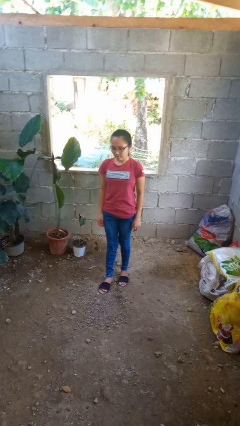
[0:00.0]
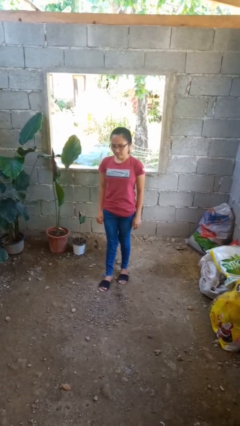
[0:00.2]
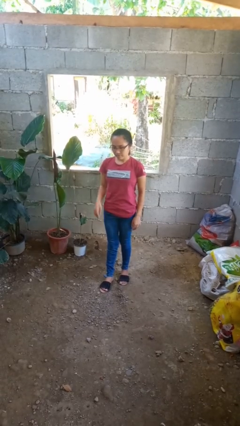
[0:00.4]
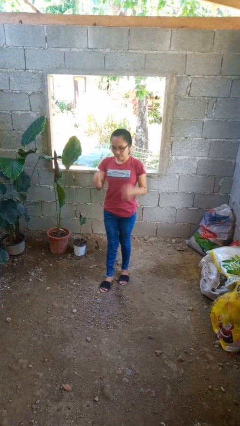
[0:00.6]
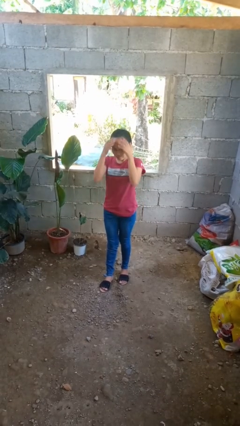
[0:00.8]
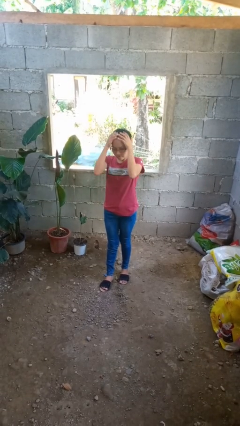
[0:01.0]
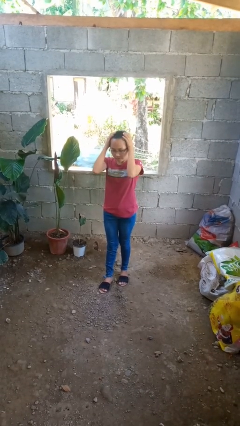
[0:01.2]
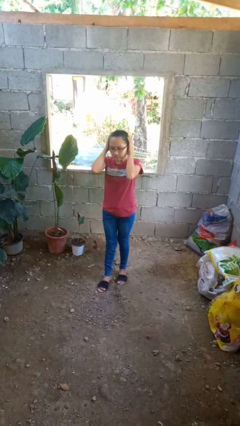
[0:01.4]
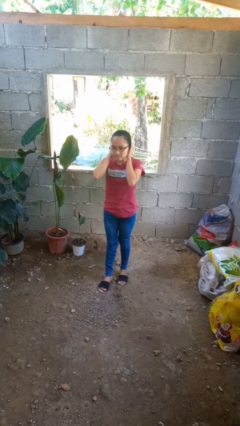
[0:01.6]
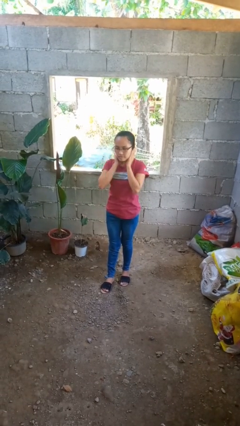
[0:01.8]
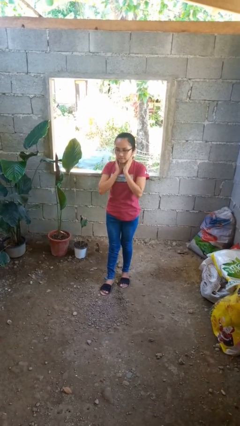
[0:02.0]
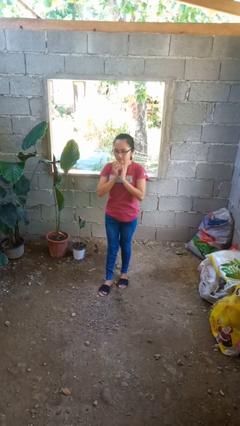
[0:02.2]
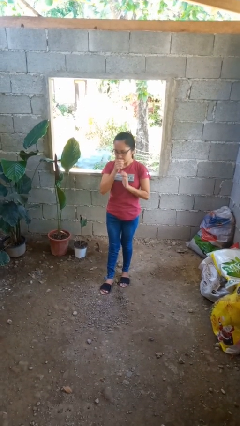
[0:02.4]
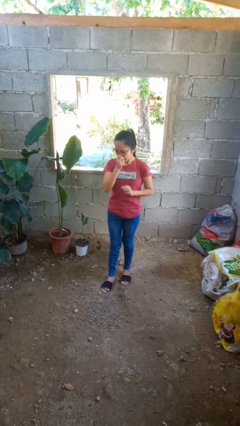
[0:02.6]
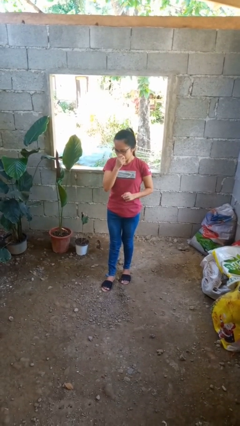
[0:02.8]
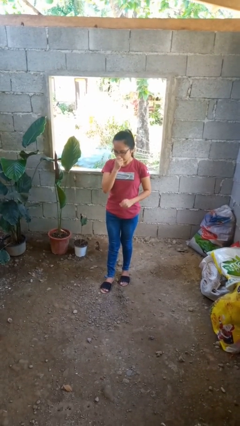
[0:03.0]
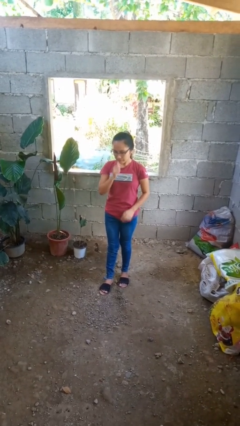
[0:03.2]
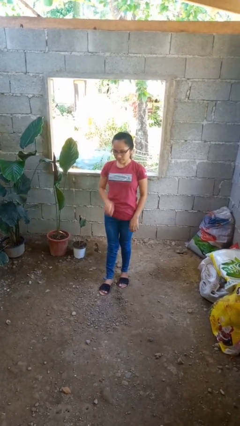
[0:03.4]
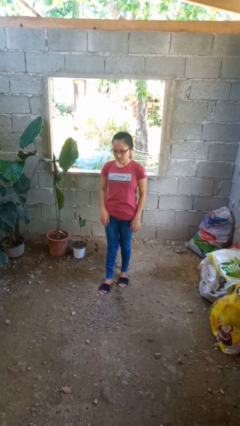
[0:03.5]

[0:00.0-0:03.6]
person scratches face

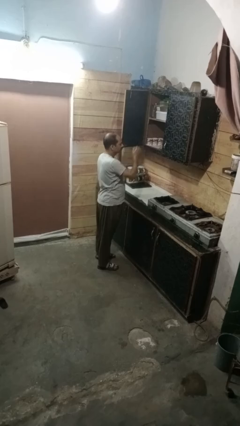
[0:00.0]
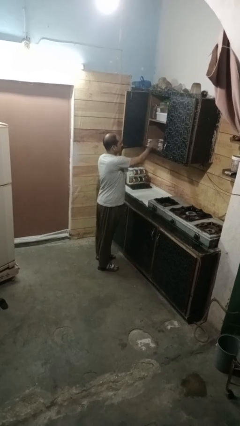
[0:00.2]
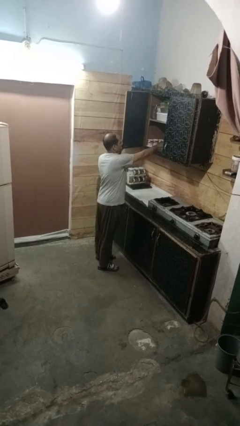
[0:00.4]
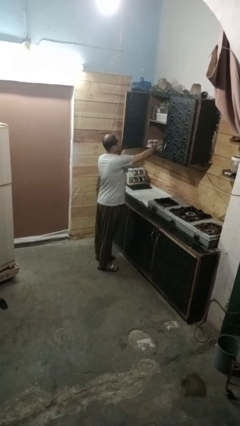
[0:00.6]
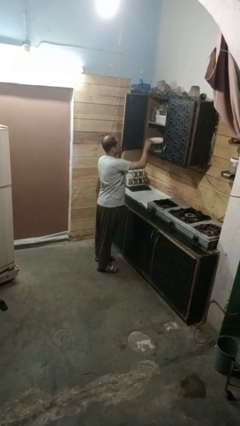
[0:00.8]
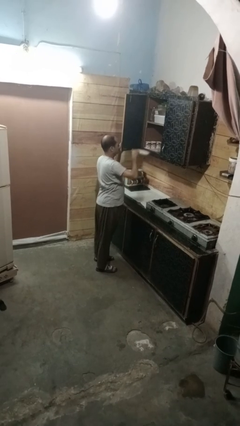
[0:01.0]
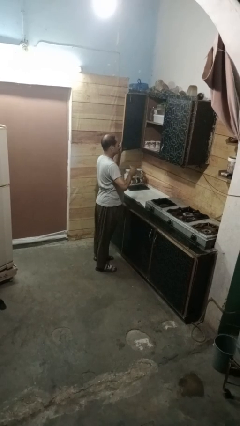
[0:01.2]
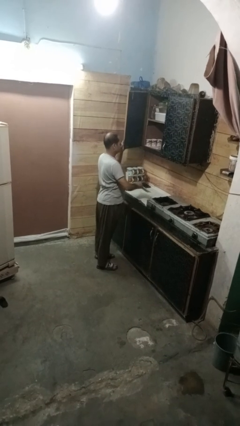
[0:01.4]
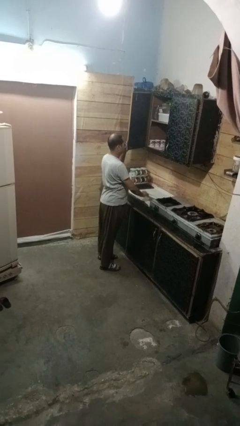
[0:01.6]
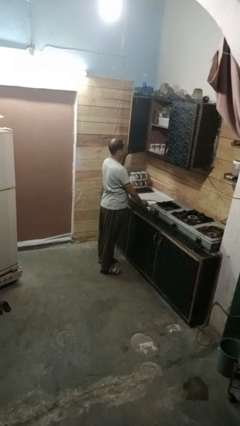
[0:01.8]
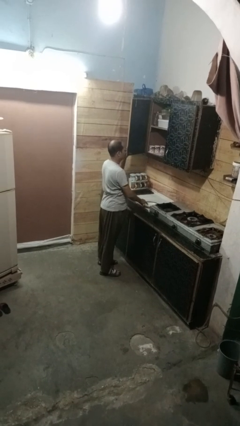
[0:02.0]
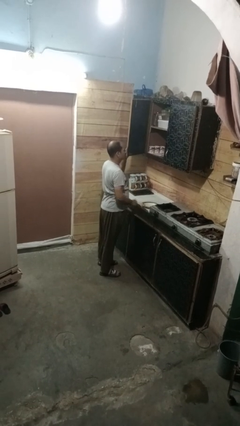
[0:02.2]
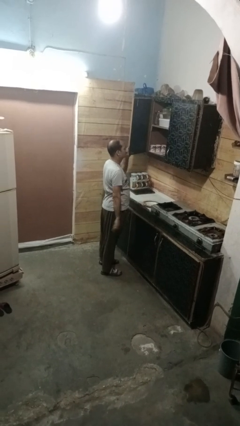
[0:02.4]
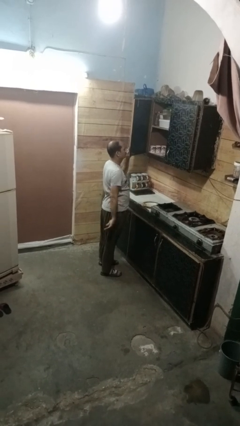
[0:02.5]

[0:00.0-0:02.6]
person takes object from cabinet

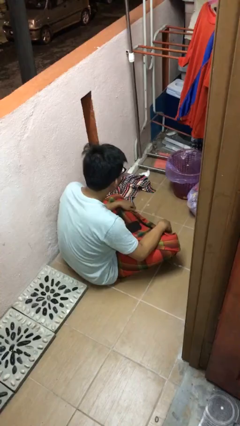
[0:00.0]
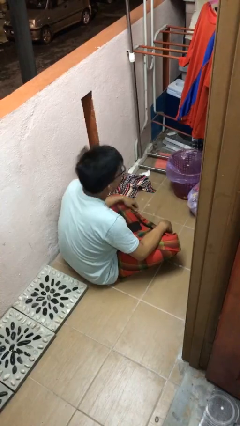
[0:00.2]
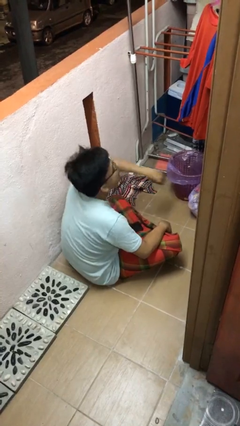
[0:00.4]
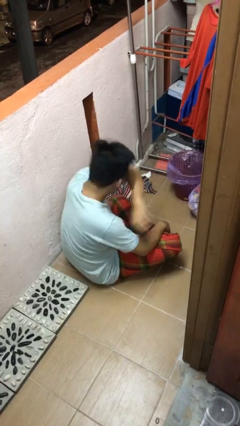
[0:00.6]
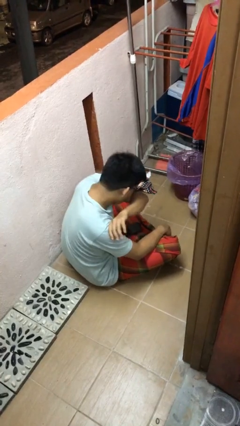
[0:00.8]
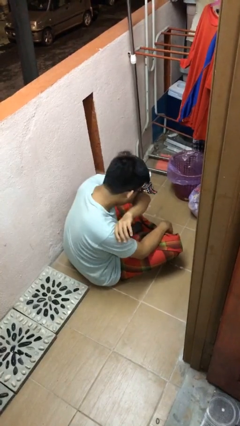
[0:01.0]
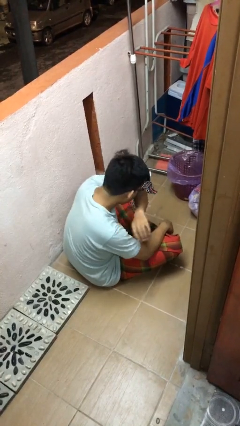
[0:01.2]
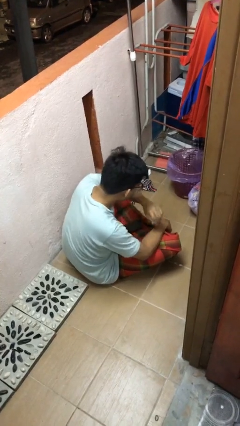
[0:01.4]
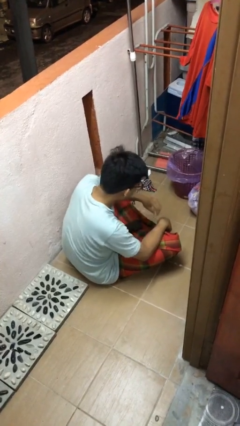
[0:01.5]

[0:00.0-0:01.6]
person sneezes into arm

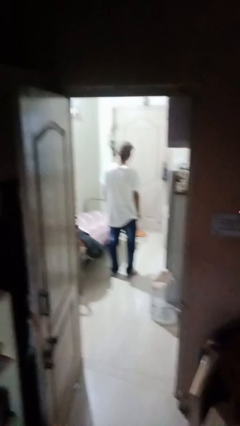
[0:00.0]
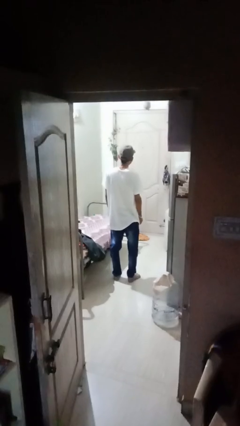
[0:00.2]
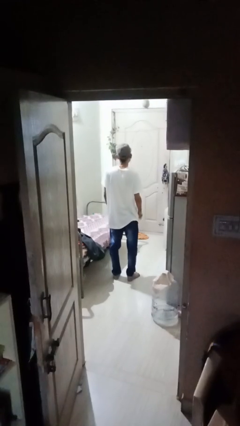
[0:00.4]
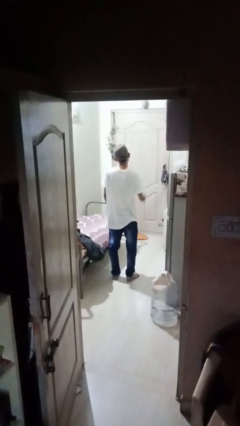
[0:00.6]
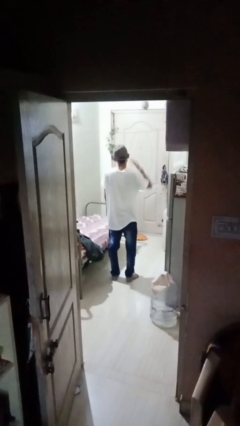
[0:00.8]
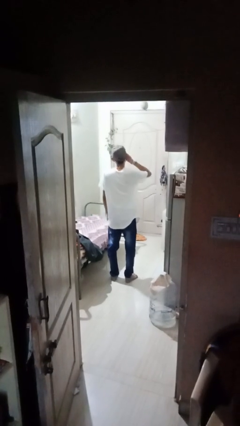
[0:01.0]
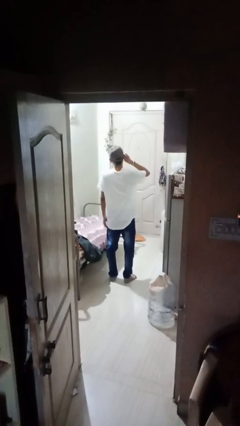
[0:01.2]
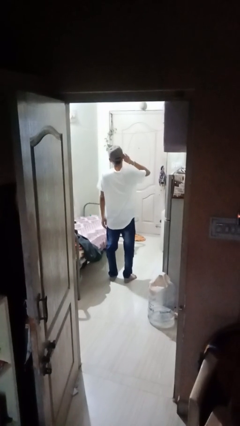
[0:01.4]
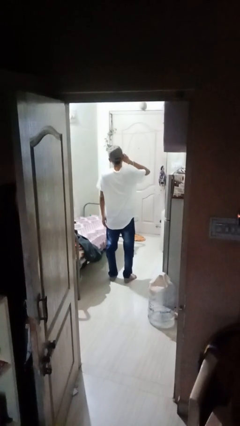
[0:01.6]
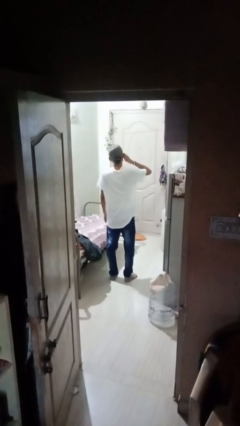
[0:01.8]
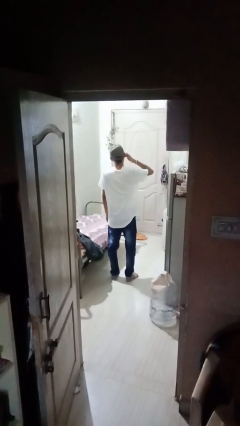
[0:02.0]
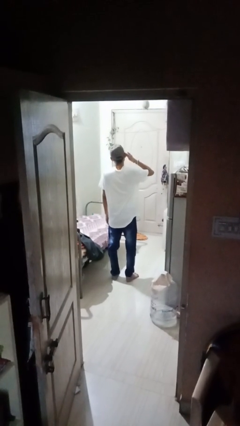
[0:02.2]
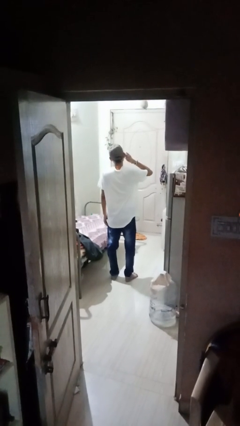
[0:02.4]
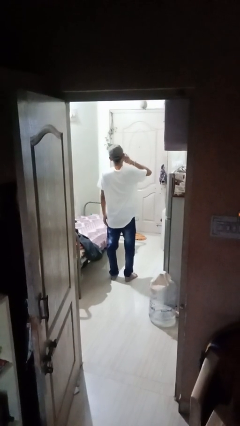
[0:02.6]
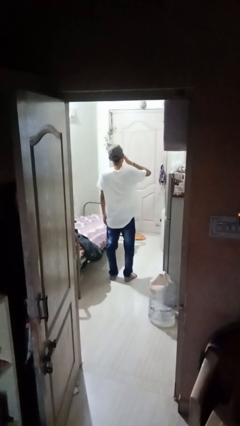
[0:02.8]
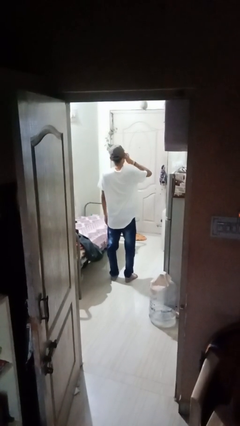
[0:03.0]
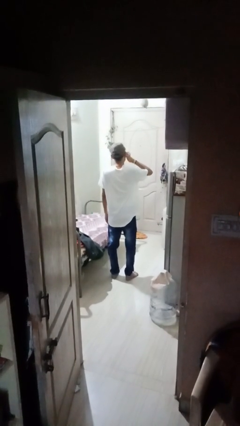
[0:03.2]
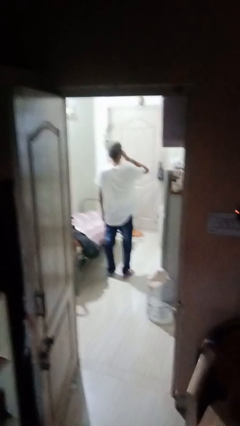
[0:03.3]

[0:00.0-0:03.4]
person rubs eyes

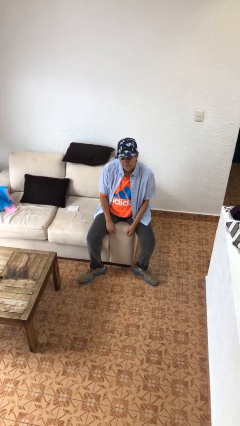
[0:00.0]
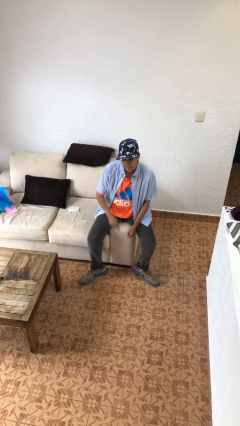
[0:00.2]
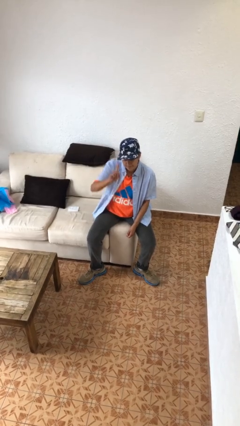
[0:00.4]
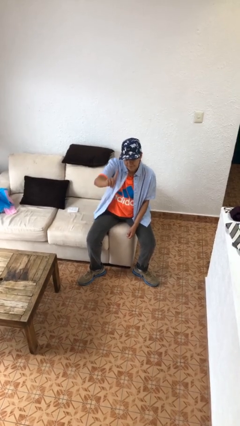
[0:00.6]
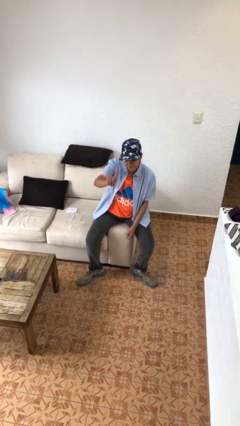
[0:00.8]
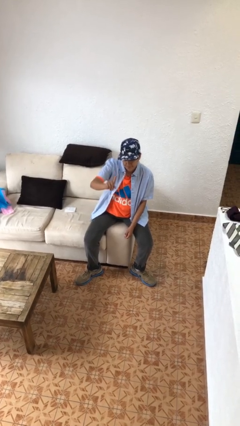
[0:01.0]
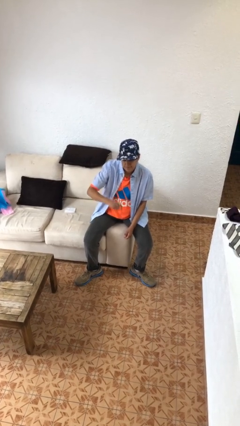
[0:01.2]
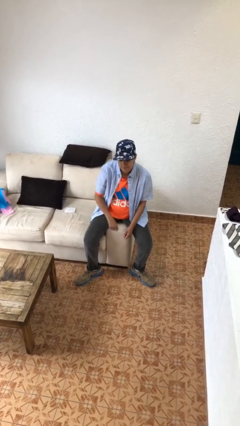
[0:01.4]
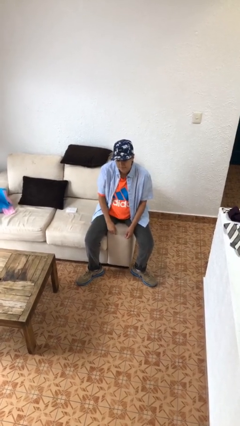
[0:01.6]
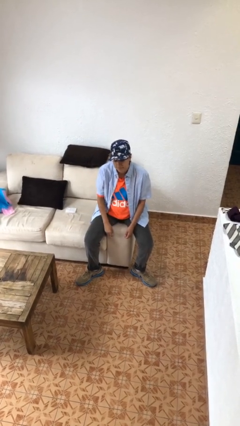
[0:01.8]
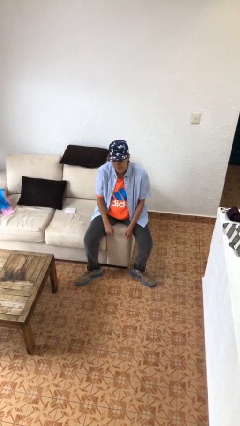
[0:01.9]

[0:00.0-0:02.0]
person gestures number one

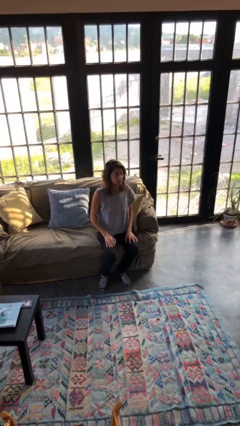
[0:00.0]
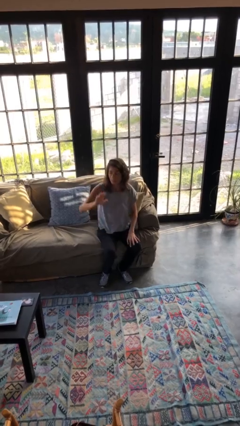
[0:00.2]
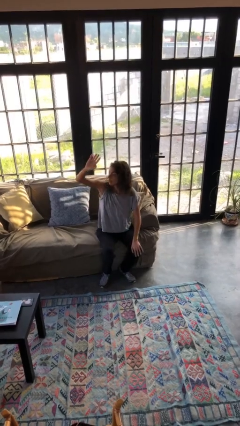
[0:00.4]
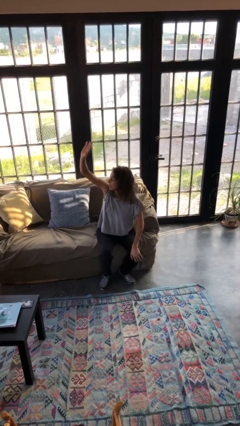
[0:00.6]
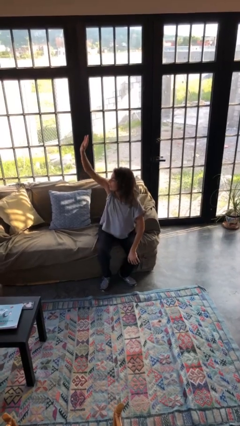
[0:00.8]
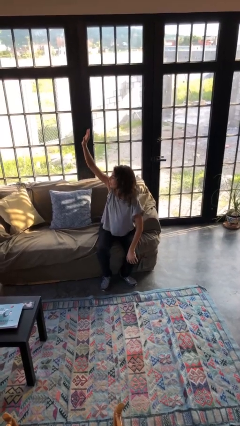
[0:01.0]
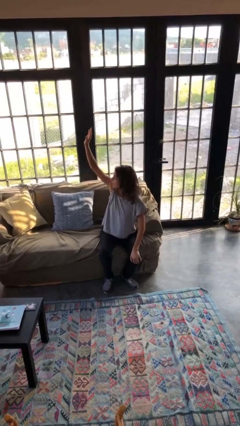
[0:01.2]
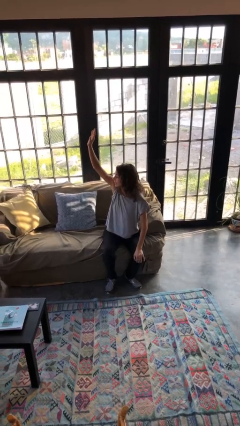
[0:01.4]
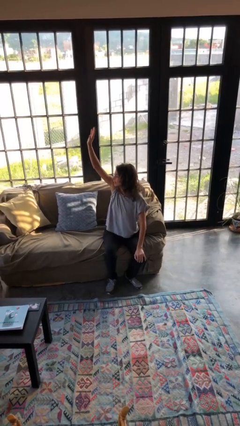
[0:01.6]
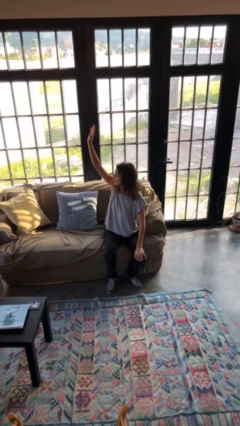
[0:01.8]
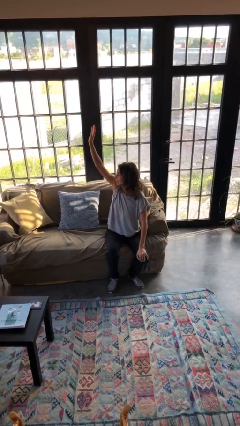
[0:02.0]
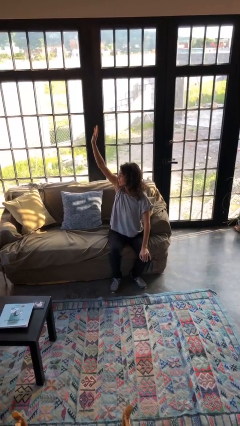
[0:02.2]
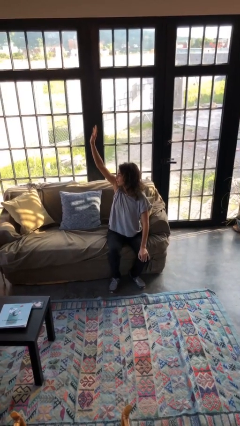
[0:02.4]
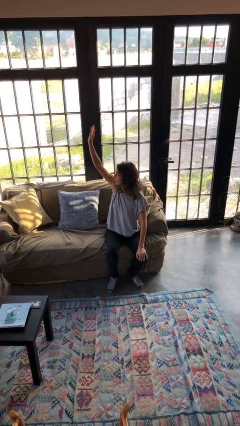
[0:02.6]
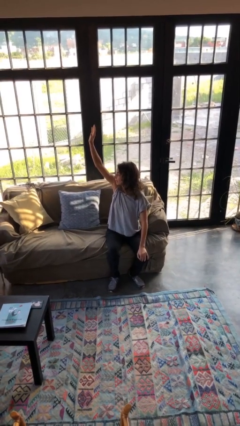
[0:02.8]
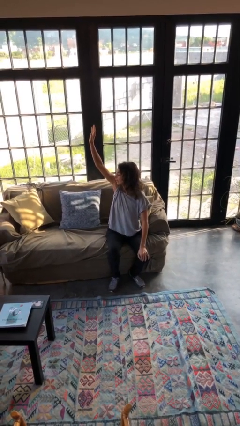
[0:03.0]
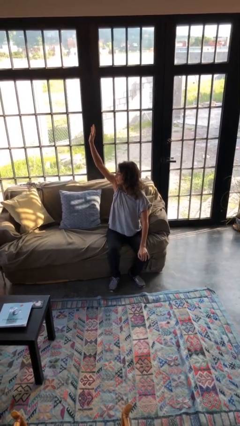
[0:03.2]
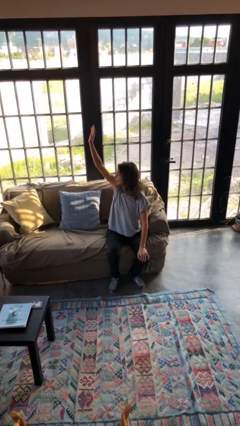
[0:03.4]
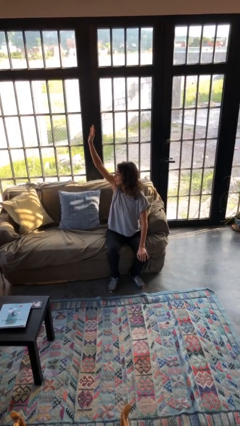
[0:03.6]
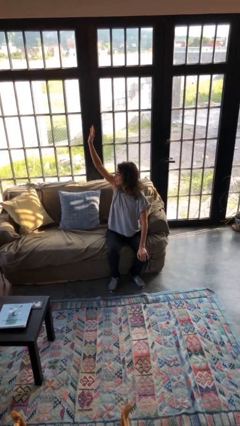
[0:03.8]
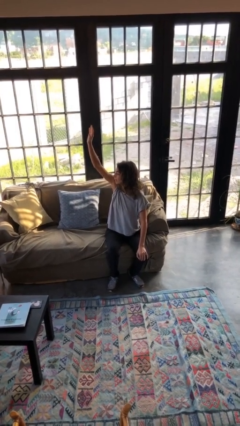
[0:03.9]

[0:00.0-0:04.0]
person gestures raise hand

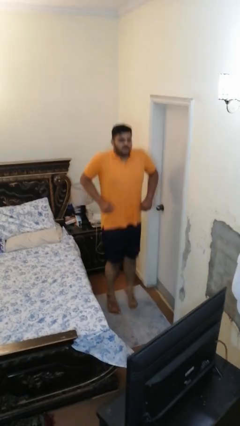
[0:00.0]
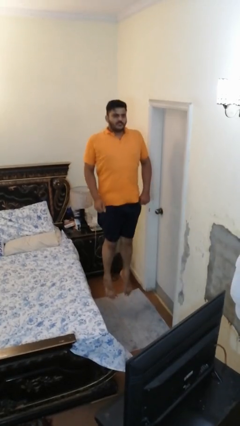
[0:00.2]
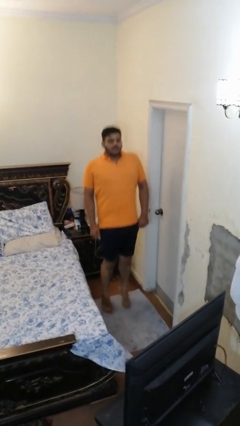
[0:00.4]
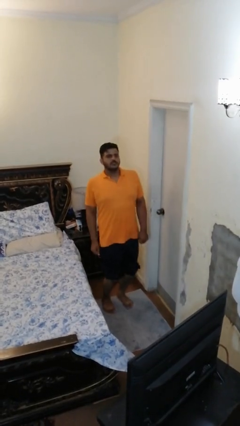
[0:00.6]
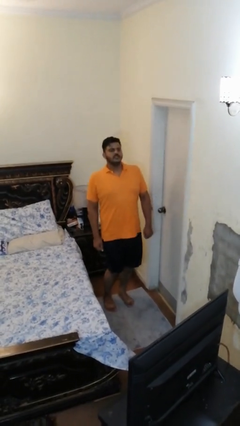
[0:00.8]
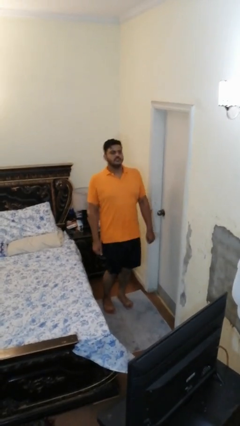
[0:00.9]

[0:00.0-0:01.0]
person jumps
